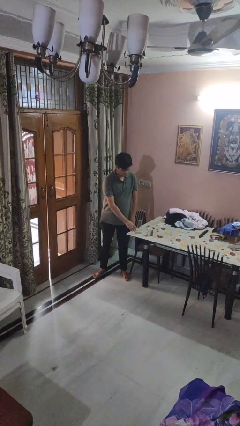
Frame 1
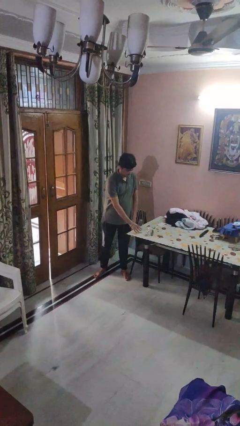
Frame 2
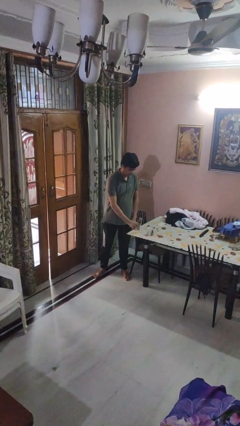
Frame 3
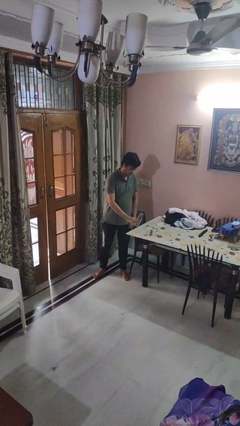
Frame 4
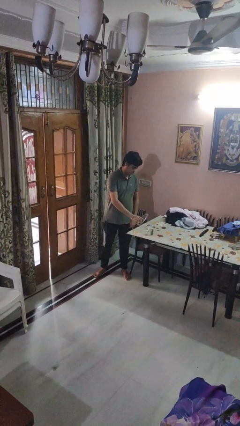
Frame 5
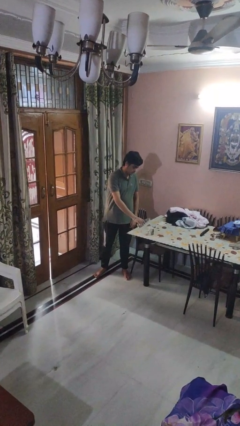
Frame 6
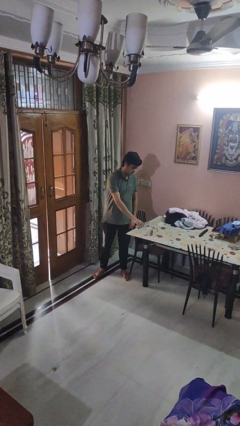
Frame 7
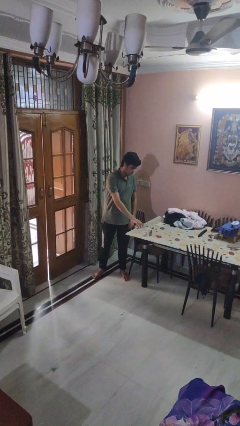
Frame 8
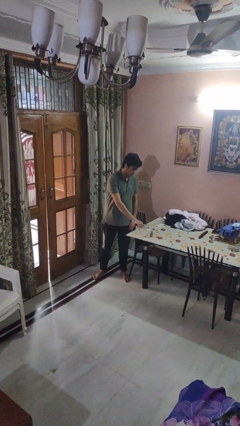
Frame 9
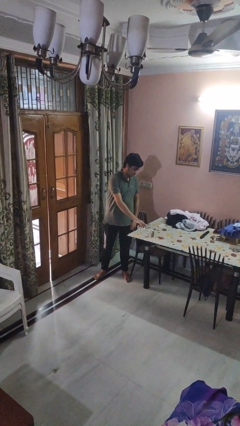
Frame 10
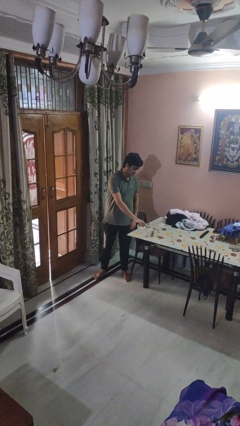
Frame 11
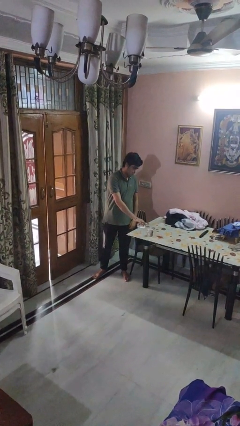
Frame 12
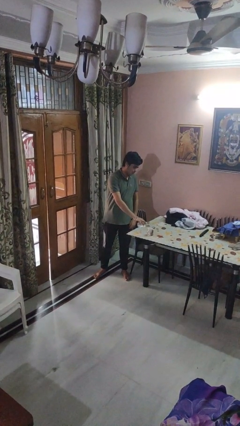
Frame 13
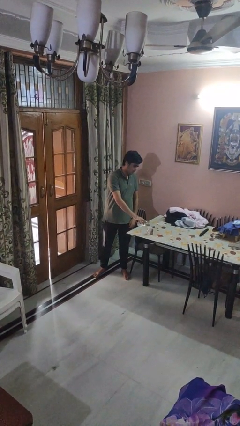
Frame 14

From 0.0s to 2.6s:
person pours liquid into cup

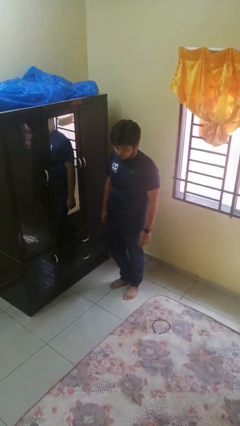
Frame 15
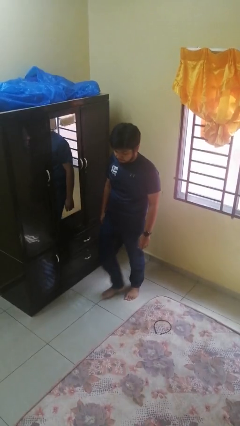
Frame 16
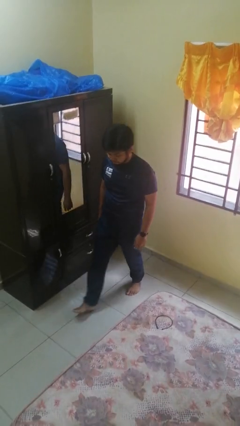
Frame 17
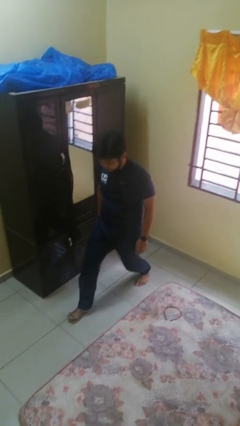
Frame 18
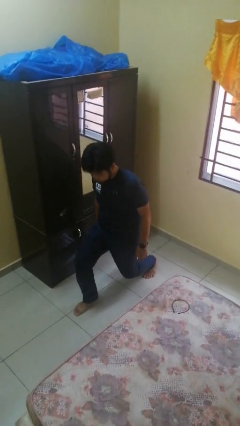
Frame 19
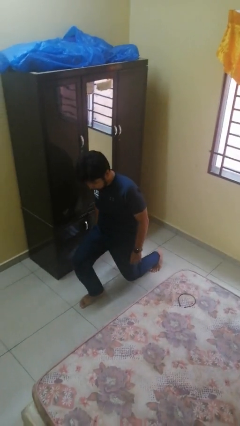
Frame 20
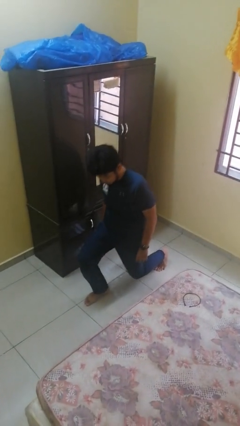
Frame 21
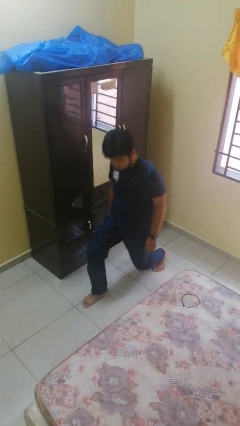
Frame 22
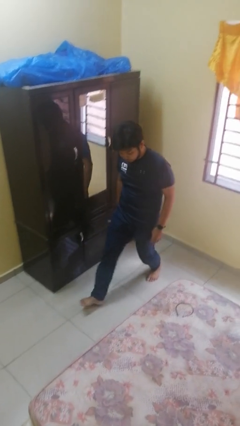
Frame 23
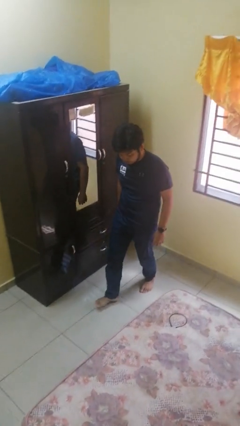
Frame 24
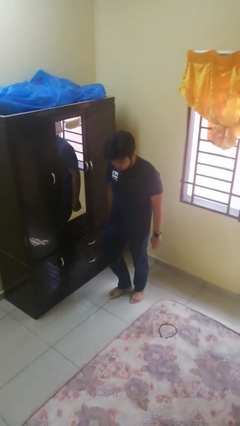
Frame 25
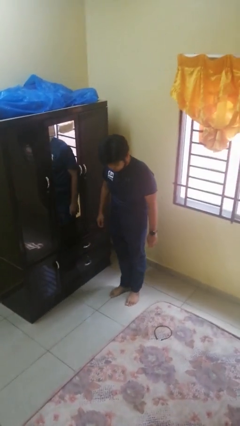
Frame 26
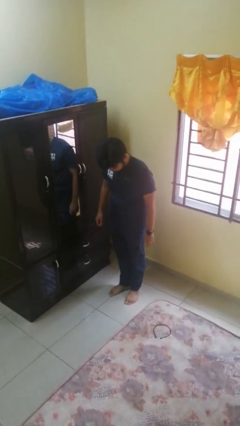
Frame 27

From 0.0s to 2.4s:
person exercises with lunges

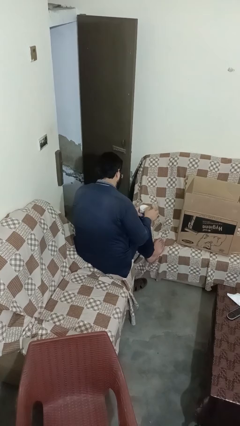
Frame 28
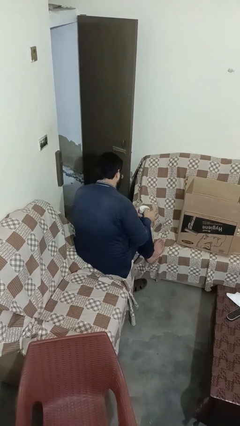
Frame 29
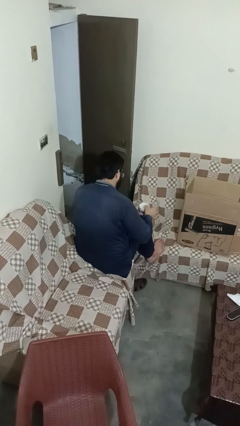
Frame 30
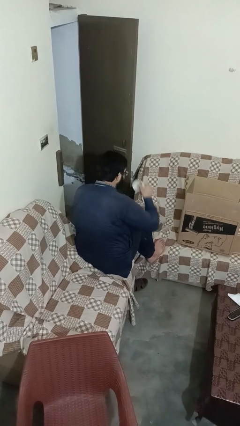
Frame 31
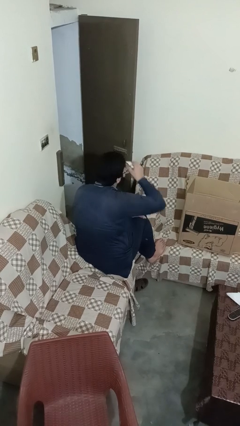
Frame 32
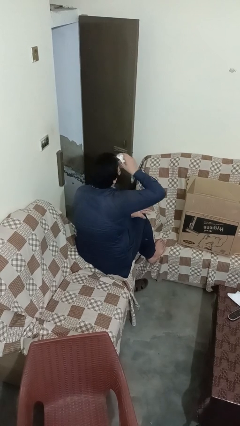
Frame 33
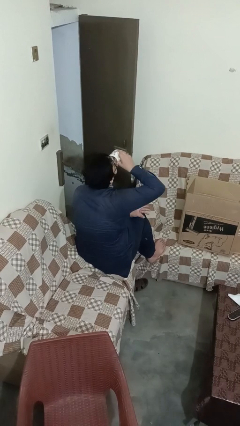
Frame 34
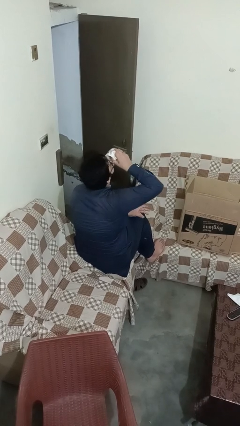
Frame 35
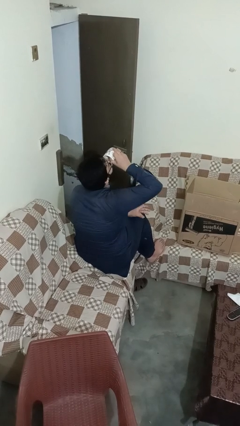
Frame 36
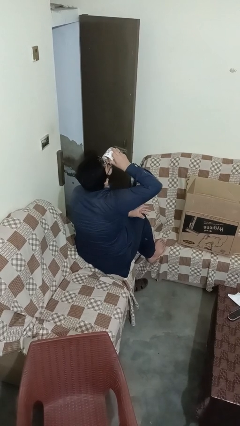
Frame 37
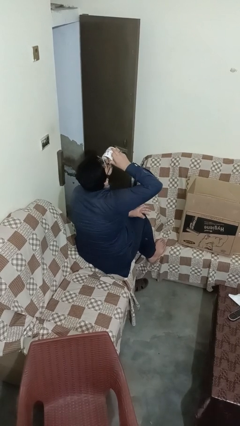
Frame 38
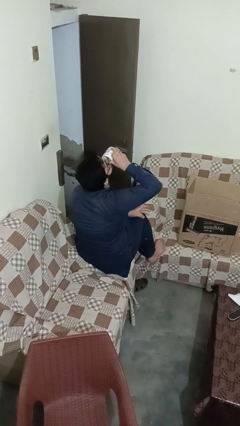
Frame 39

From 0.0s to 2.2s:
person drinks from mug

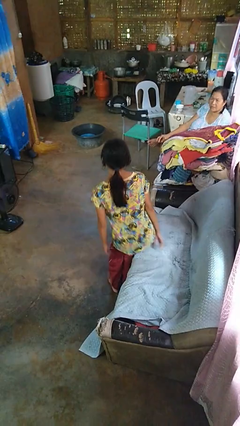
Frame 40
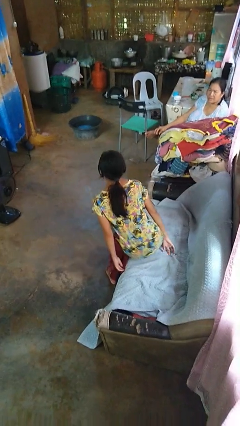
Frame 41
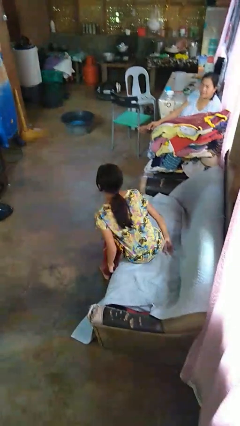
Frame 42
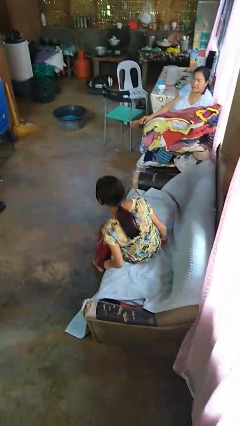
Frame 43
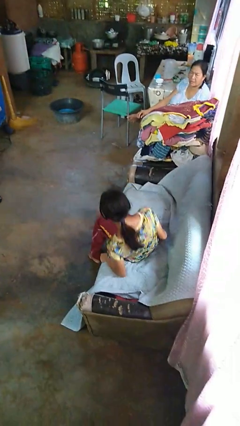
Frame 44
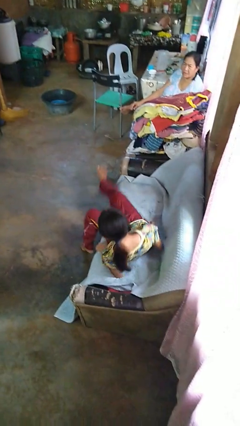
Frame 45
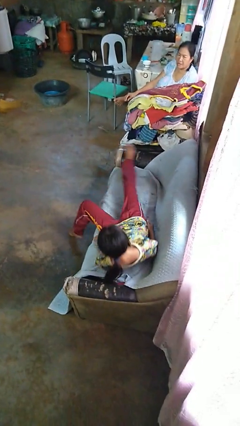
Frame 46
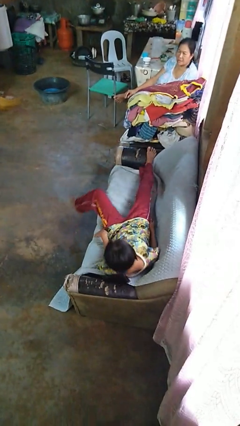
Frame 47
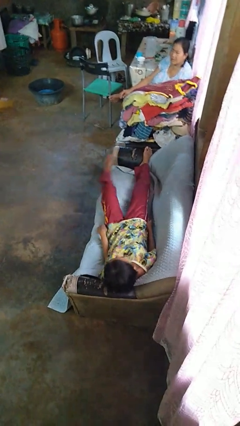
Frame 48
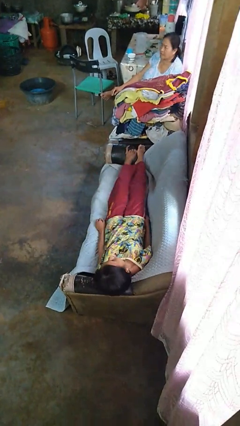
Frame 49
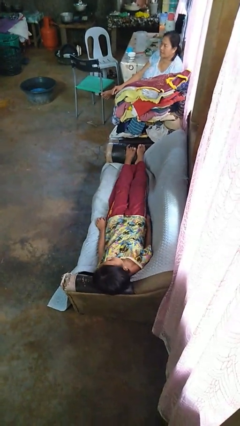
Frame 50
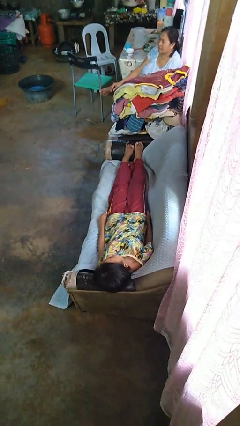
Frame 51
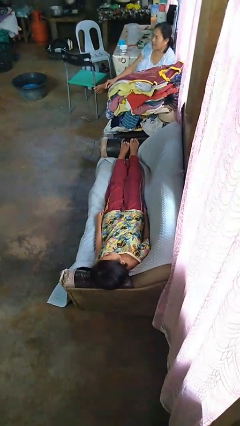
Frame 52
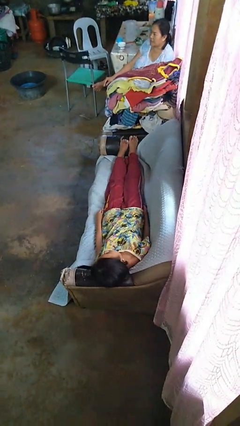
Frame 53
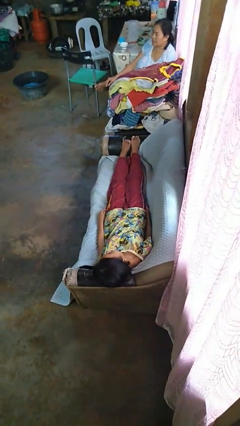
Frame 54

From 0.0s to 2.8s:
person lies down on couch

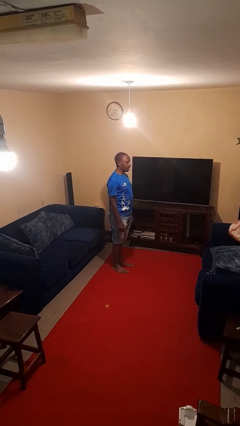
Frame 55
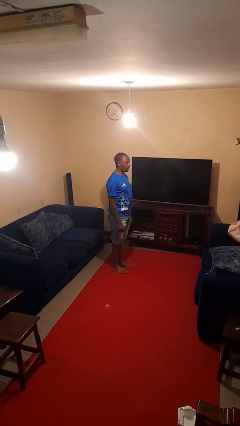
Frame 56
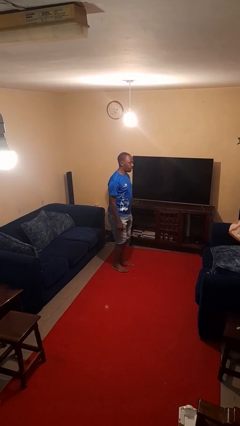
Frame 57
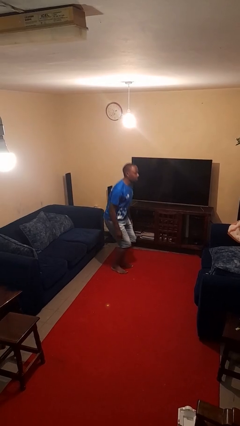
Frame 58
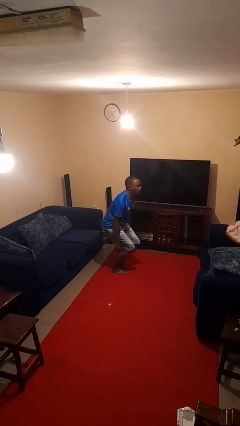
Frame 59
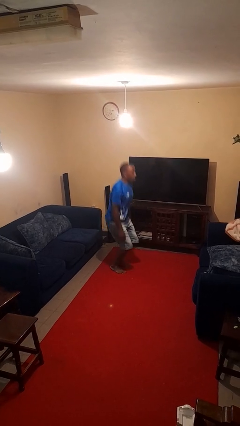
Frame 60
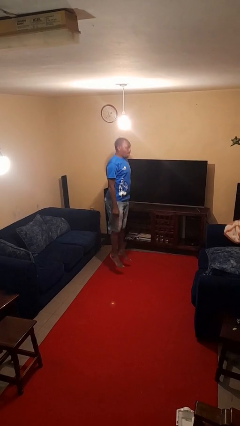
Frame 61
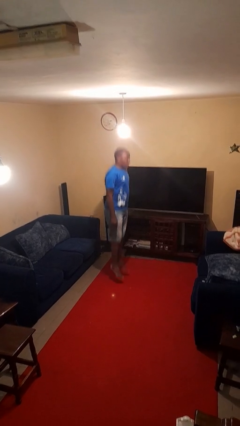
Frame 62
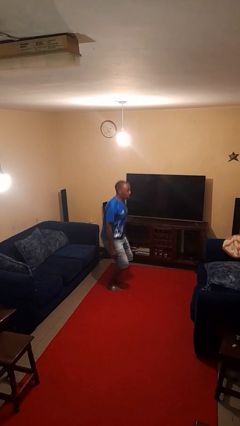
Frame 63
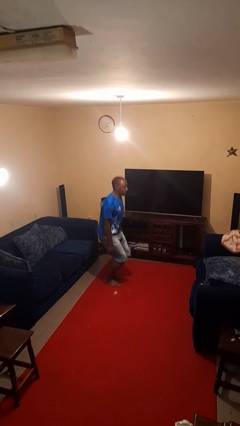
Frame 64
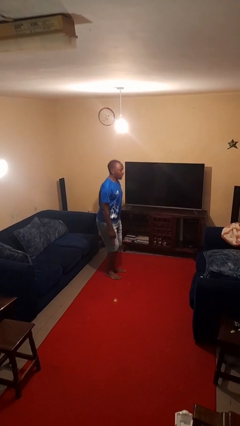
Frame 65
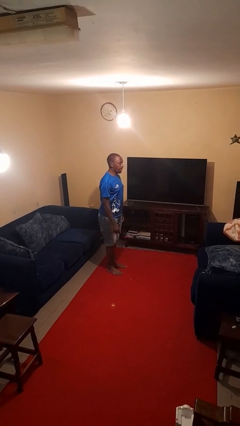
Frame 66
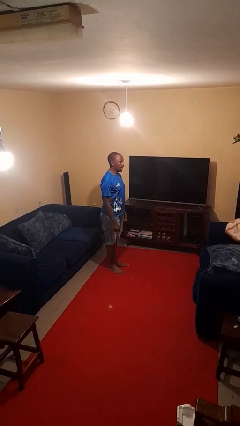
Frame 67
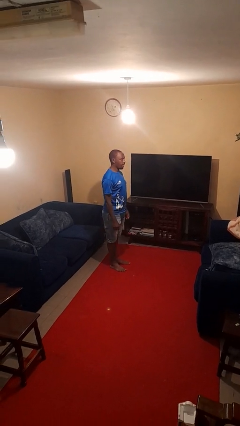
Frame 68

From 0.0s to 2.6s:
person jumps

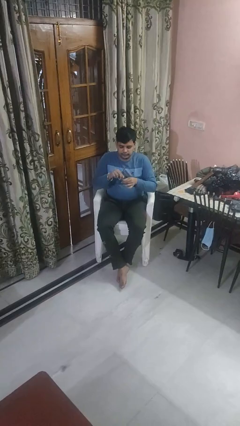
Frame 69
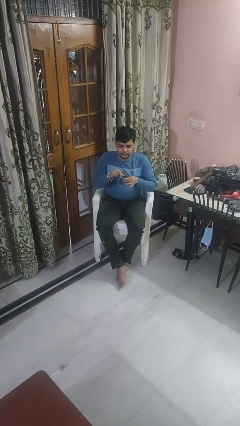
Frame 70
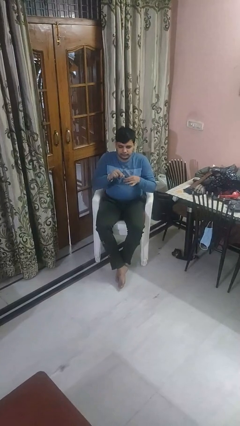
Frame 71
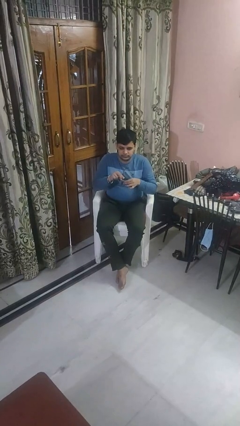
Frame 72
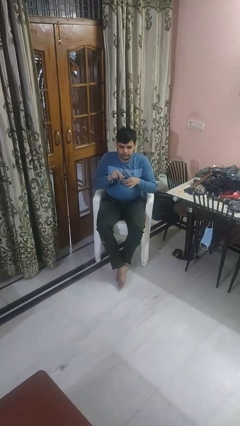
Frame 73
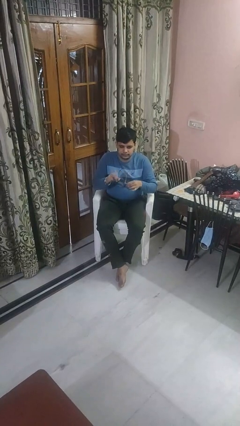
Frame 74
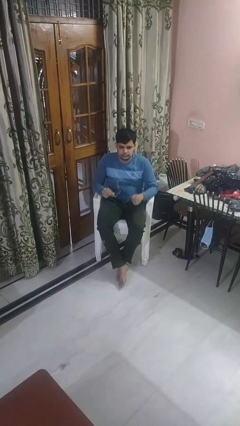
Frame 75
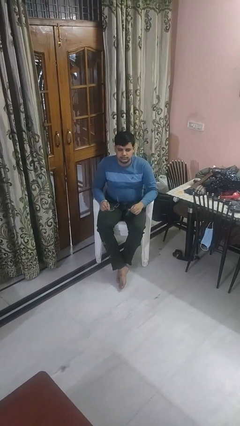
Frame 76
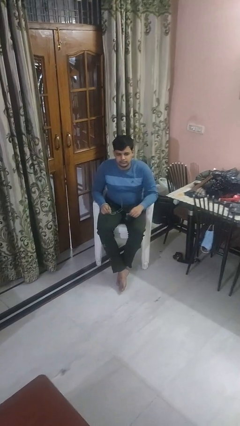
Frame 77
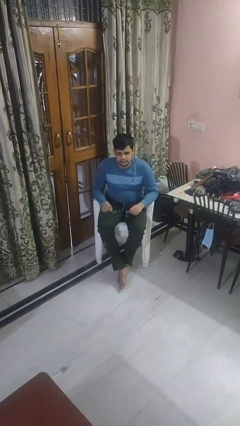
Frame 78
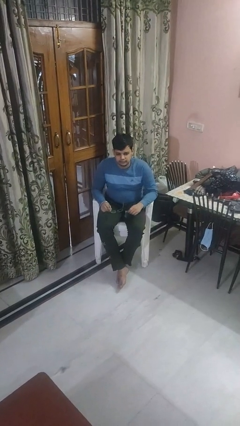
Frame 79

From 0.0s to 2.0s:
person cleans eyeglasses

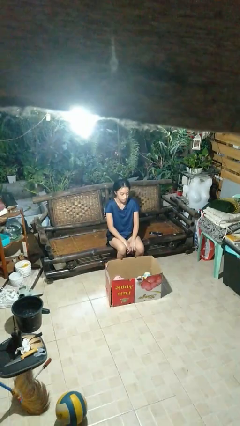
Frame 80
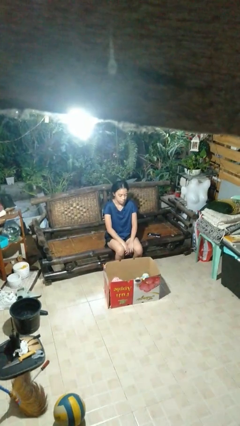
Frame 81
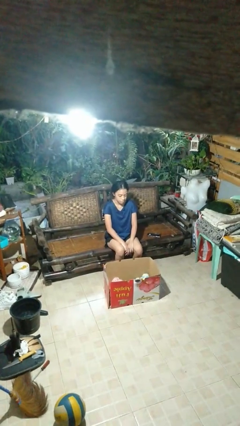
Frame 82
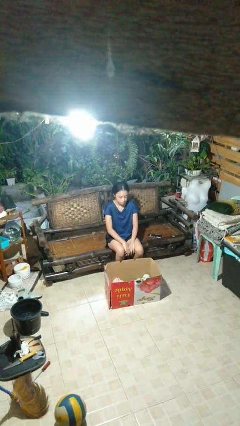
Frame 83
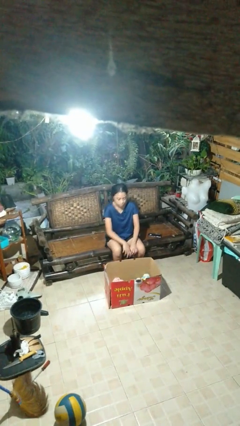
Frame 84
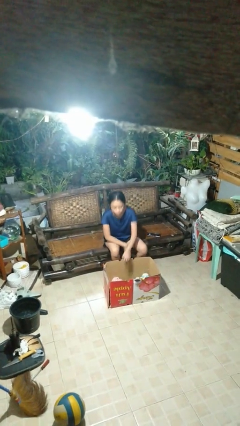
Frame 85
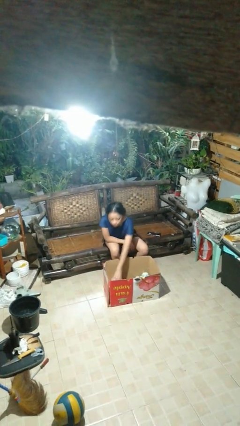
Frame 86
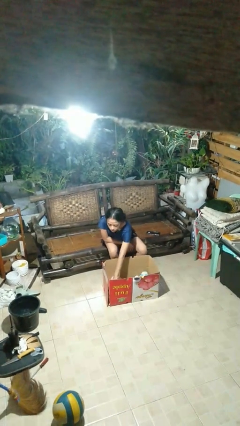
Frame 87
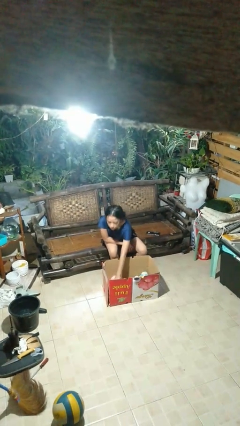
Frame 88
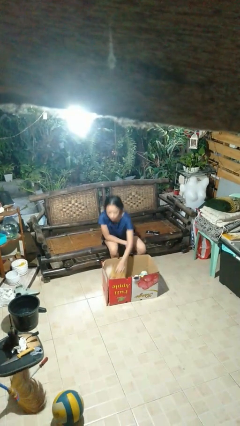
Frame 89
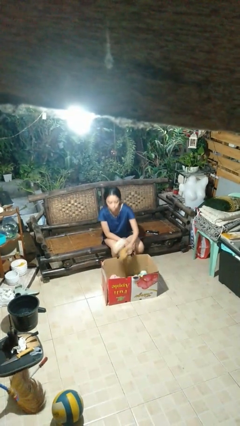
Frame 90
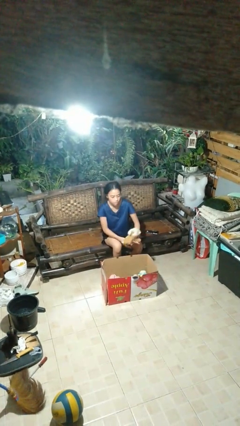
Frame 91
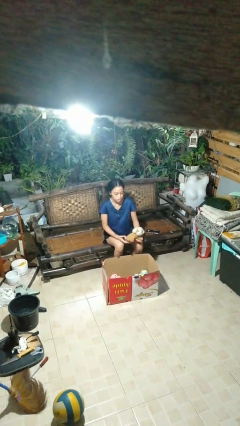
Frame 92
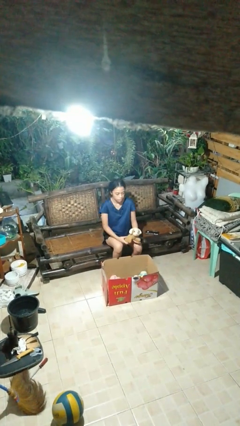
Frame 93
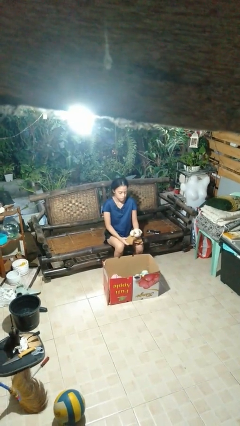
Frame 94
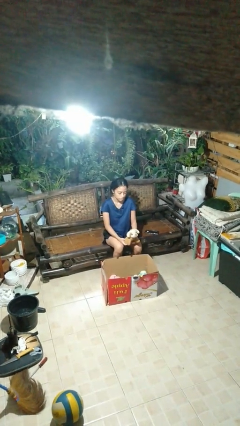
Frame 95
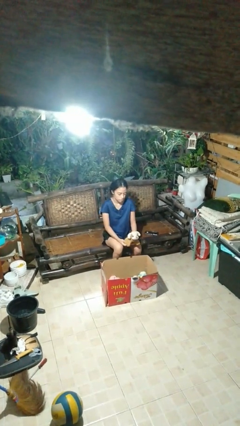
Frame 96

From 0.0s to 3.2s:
person takes object from box
